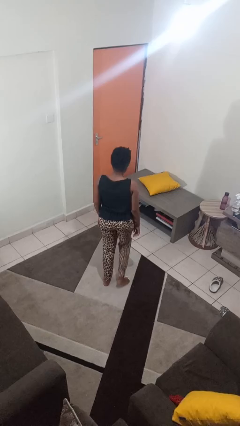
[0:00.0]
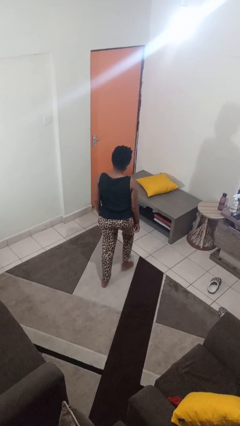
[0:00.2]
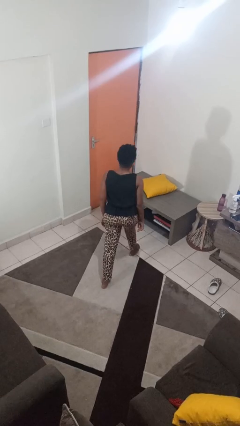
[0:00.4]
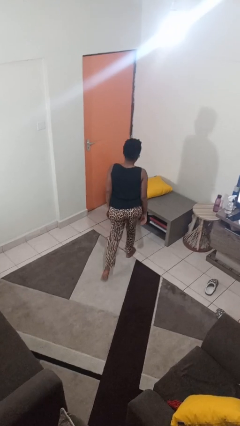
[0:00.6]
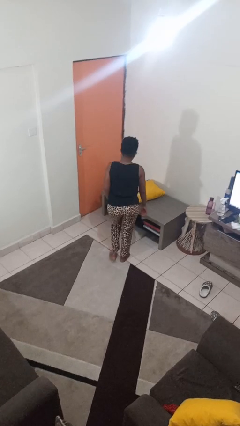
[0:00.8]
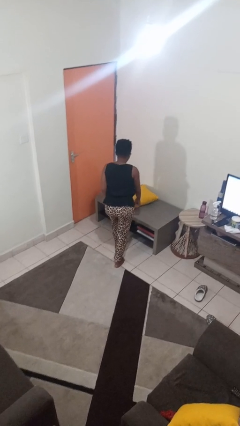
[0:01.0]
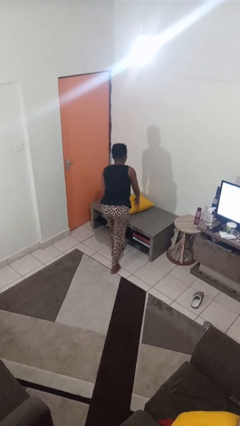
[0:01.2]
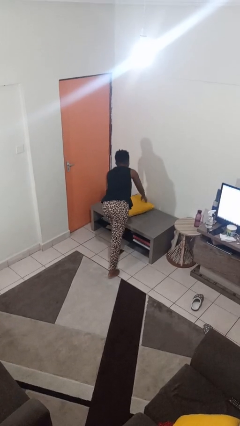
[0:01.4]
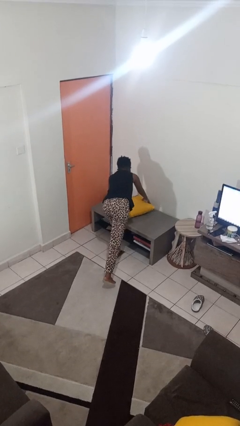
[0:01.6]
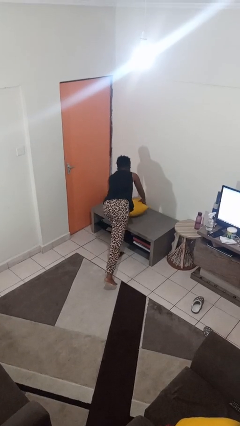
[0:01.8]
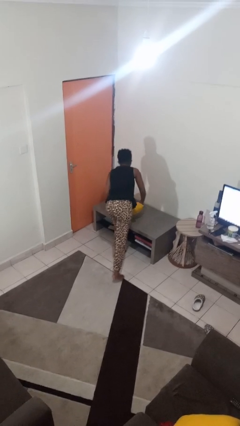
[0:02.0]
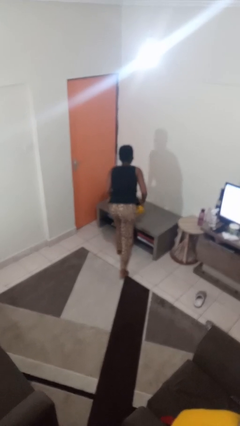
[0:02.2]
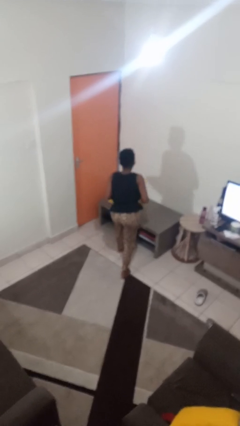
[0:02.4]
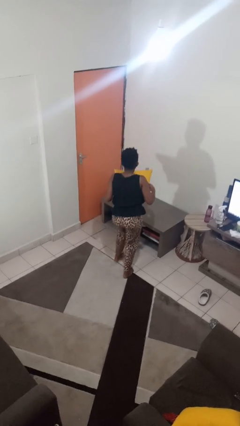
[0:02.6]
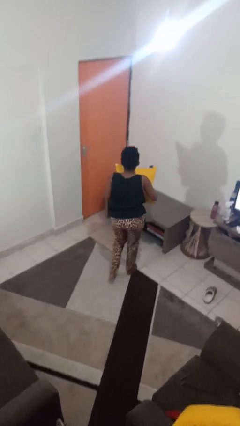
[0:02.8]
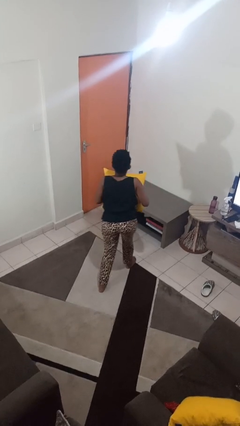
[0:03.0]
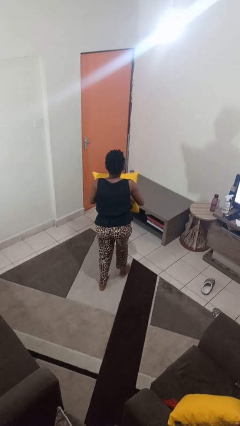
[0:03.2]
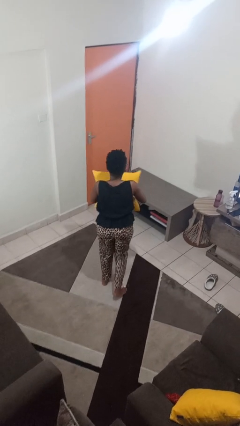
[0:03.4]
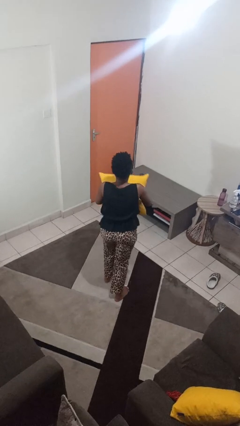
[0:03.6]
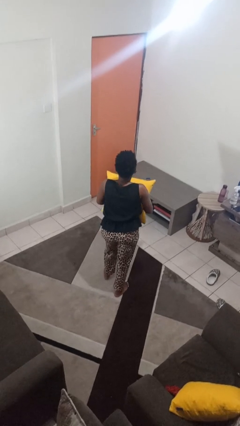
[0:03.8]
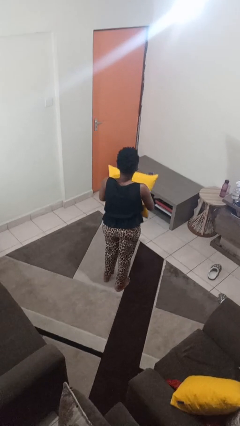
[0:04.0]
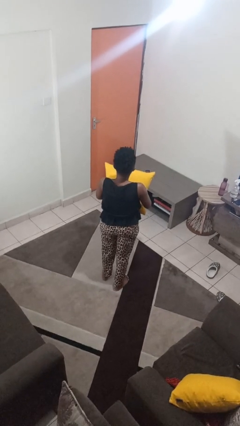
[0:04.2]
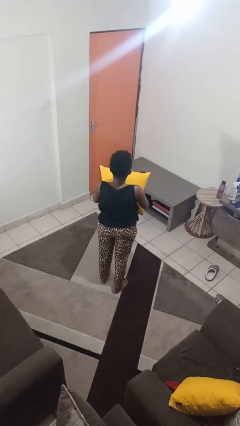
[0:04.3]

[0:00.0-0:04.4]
person picks up object from table

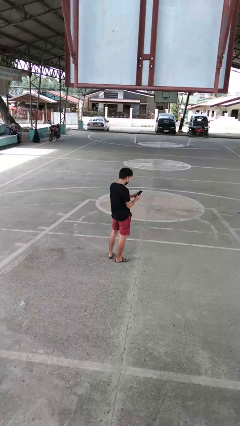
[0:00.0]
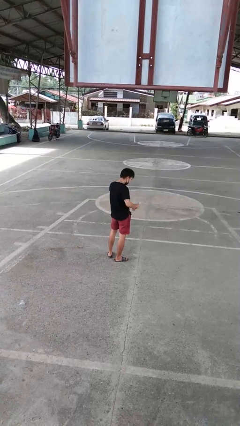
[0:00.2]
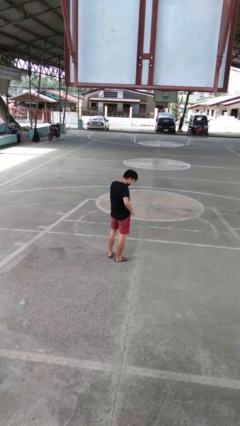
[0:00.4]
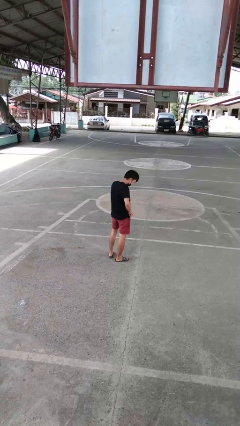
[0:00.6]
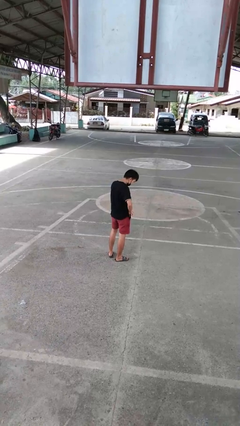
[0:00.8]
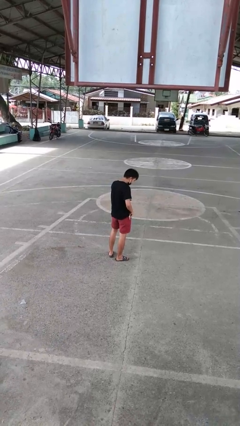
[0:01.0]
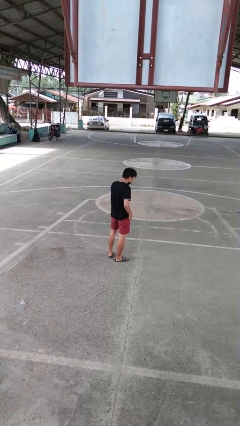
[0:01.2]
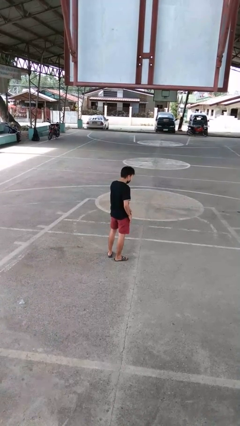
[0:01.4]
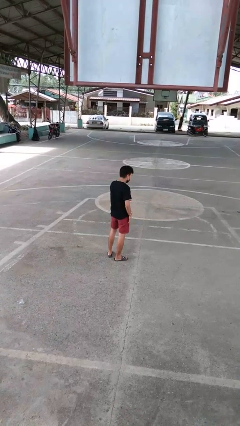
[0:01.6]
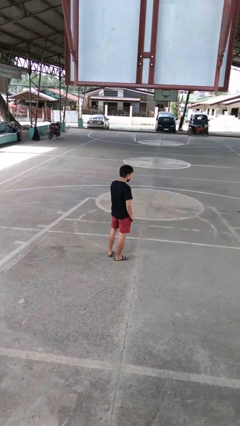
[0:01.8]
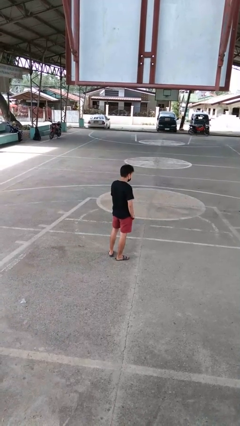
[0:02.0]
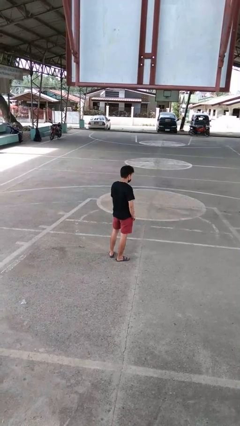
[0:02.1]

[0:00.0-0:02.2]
person puts phone into pocket

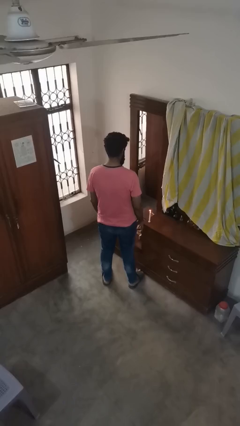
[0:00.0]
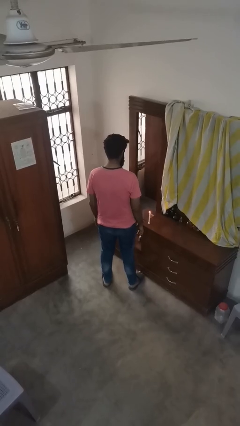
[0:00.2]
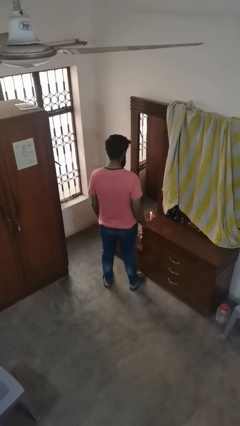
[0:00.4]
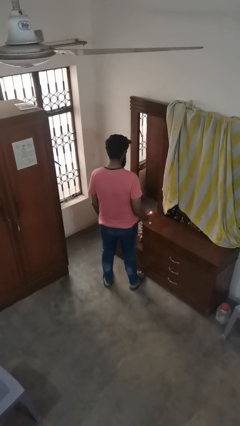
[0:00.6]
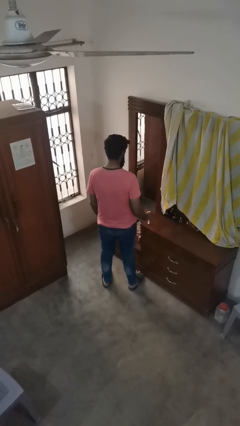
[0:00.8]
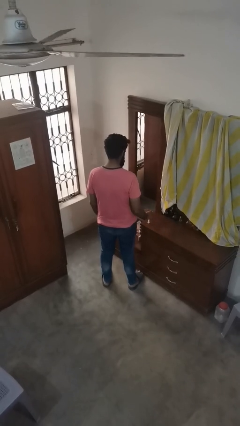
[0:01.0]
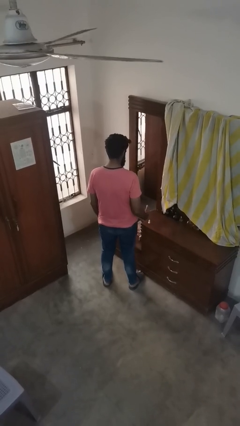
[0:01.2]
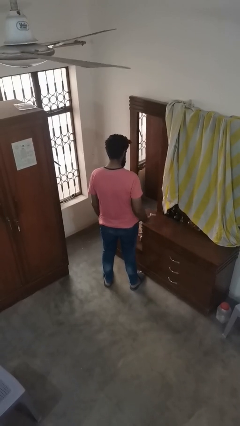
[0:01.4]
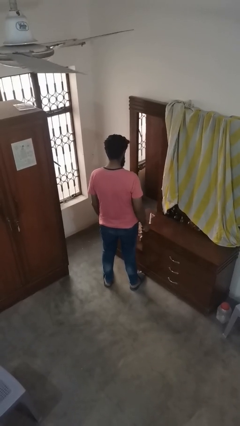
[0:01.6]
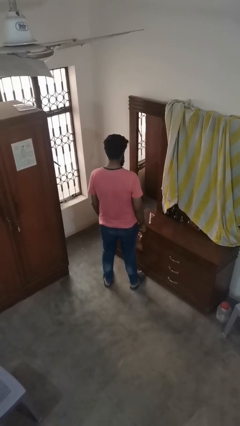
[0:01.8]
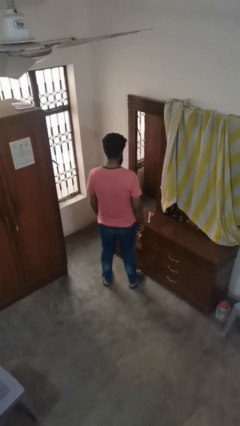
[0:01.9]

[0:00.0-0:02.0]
person extinguishes candle

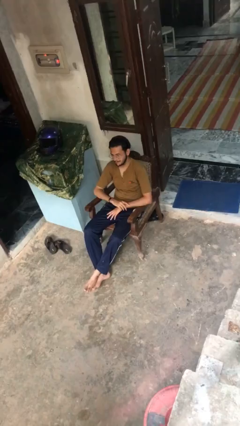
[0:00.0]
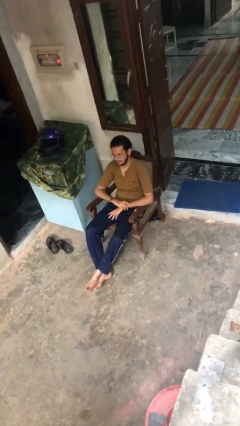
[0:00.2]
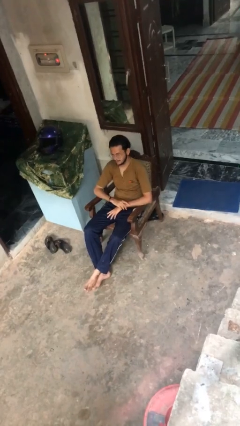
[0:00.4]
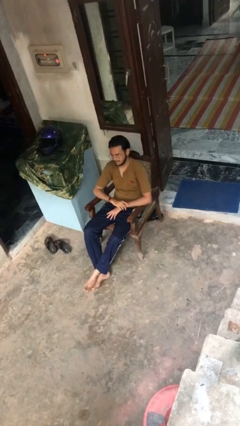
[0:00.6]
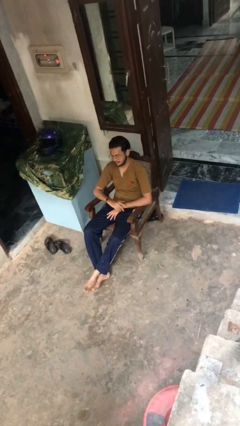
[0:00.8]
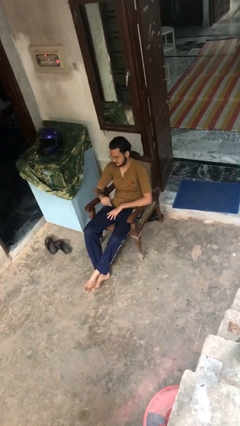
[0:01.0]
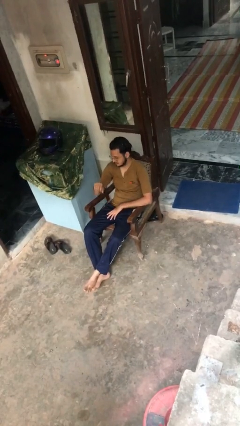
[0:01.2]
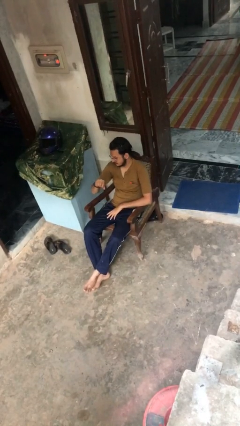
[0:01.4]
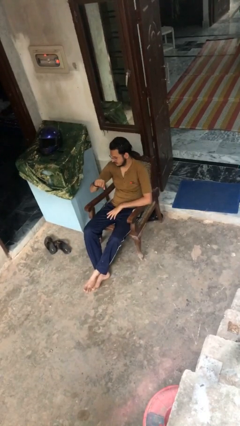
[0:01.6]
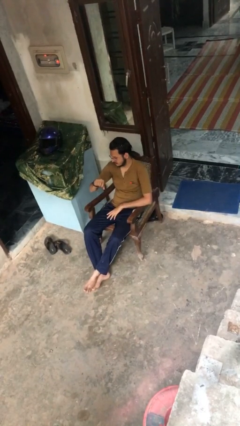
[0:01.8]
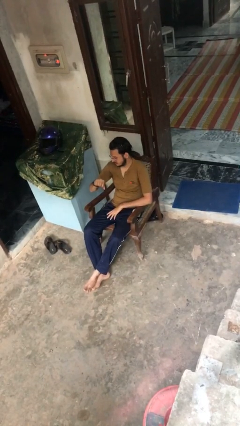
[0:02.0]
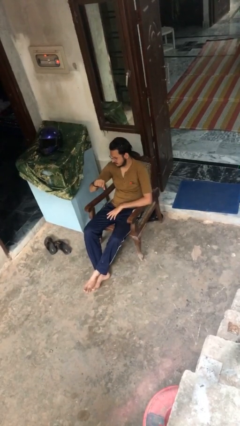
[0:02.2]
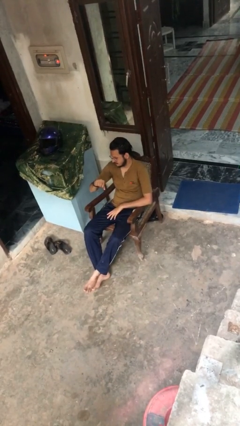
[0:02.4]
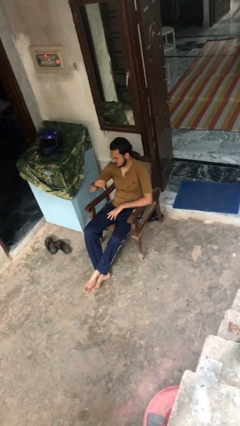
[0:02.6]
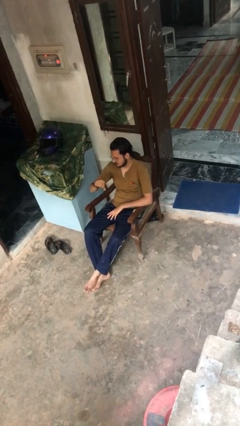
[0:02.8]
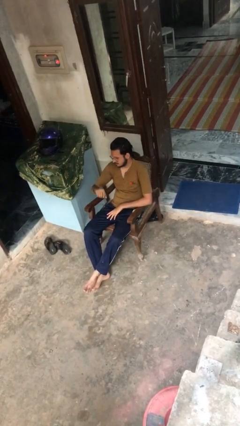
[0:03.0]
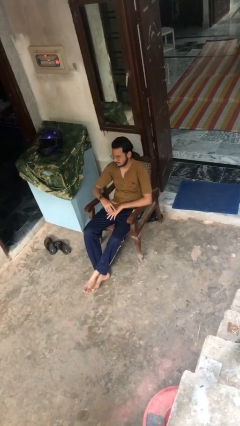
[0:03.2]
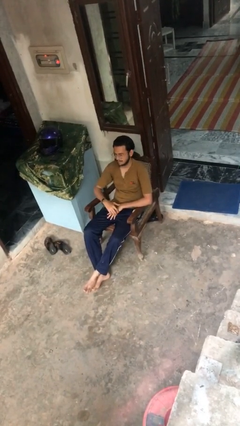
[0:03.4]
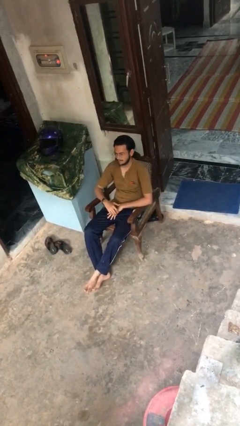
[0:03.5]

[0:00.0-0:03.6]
person looks at wristwatch

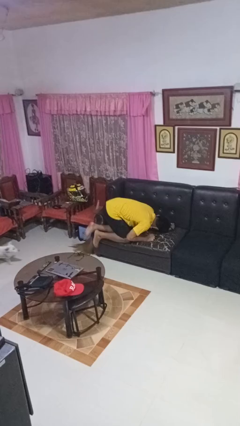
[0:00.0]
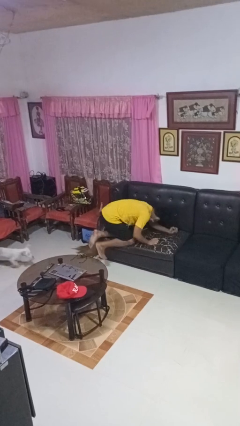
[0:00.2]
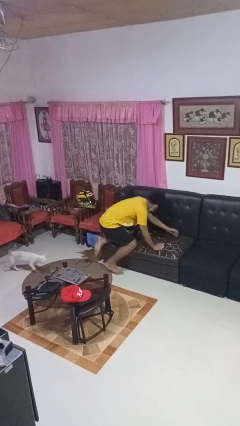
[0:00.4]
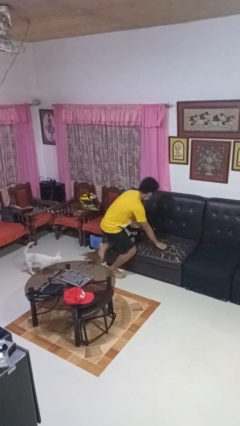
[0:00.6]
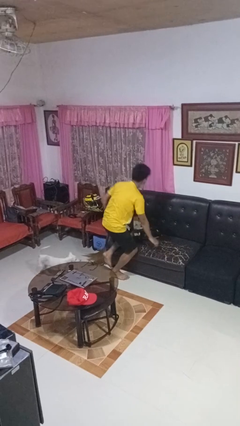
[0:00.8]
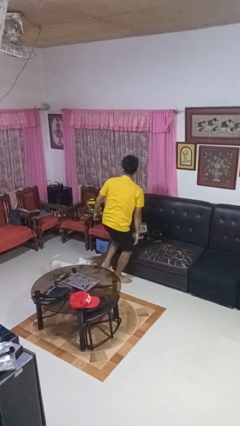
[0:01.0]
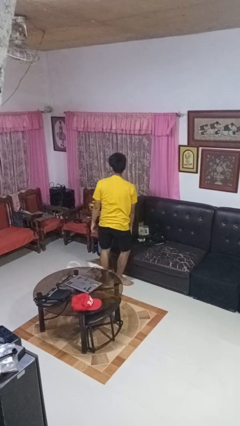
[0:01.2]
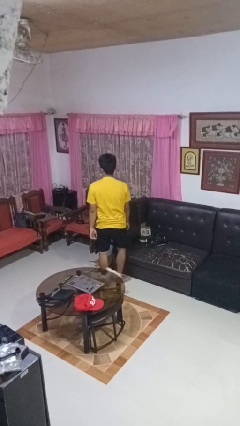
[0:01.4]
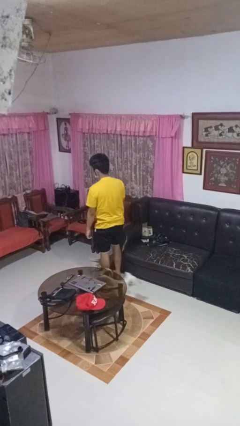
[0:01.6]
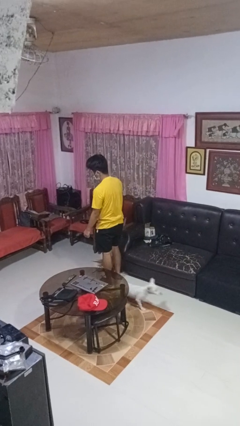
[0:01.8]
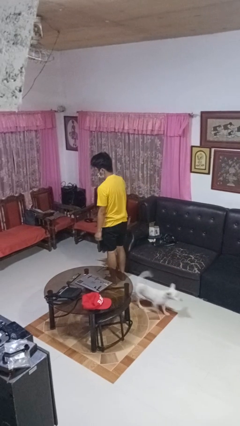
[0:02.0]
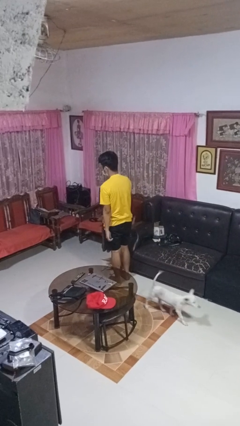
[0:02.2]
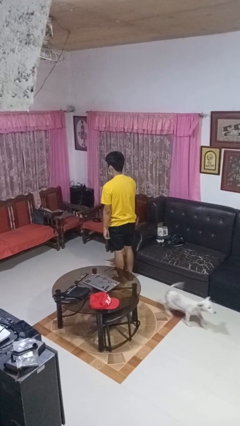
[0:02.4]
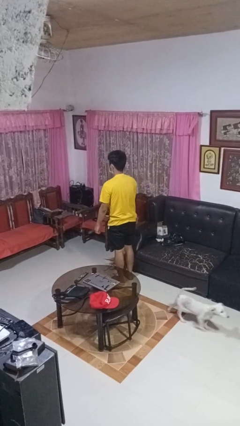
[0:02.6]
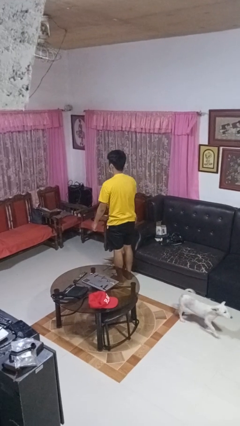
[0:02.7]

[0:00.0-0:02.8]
person stands up

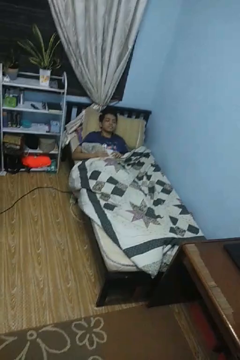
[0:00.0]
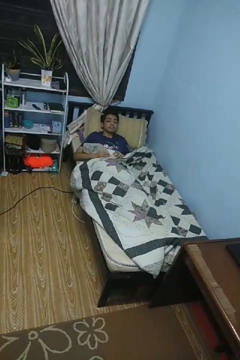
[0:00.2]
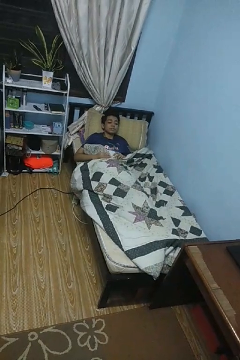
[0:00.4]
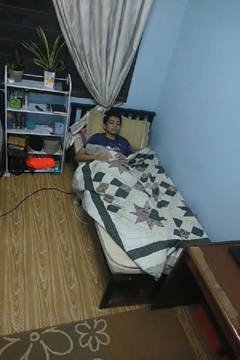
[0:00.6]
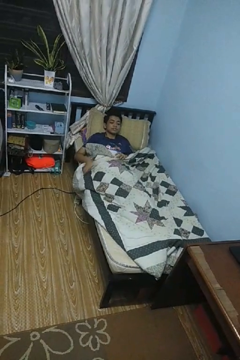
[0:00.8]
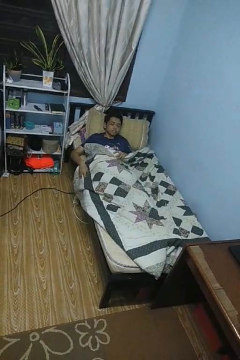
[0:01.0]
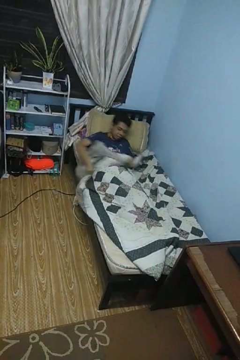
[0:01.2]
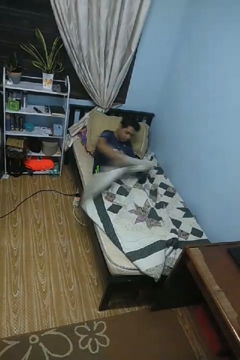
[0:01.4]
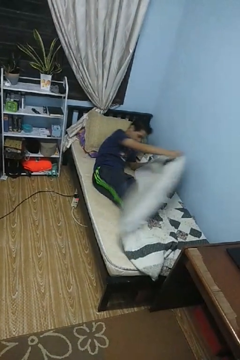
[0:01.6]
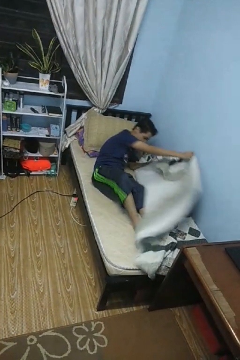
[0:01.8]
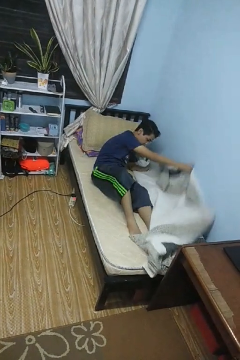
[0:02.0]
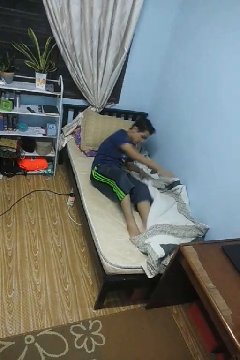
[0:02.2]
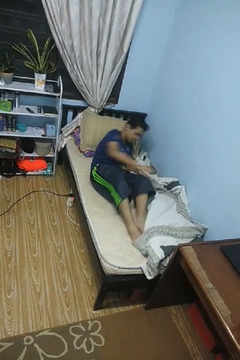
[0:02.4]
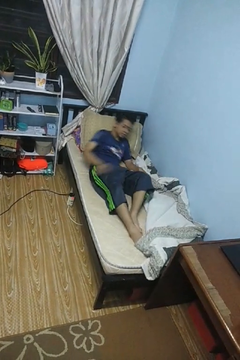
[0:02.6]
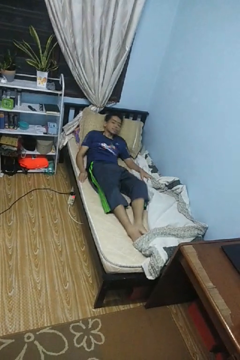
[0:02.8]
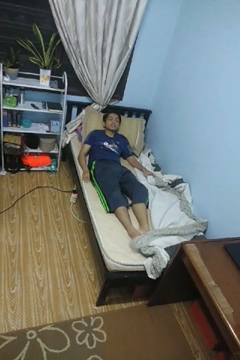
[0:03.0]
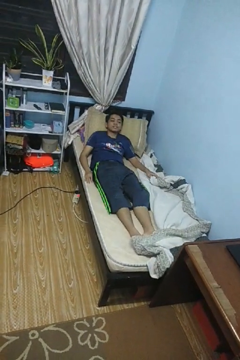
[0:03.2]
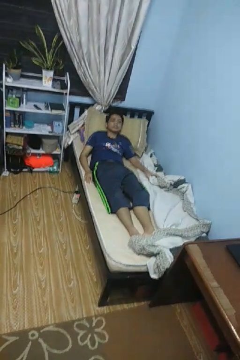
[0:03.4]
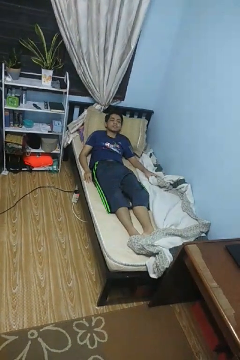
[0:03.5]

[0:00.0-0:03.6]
person uncovers with bedsheets
